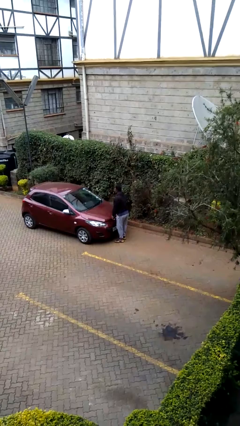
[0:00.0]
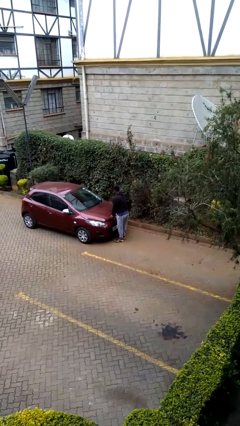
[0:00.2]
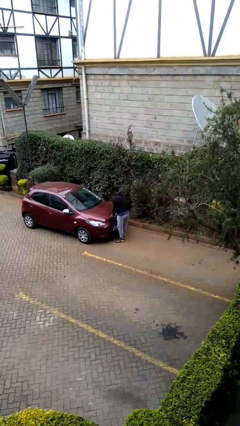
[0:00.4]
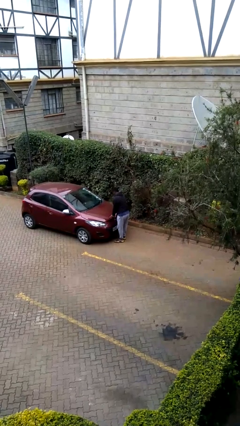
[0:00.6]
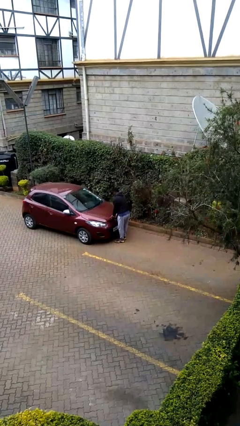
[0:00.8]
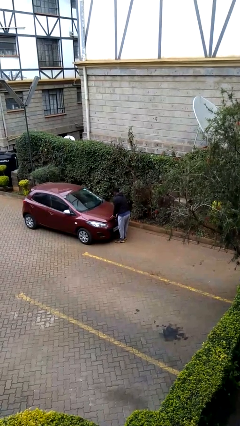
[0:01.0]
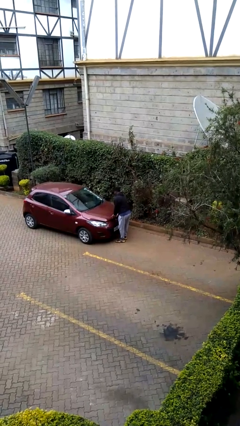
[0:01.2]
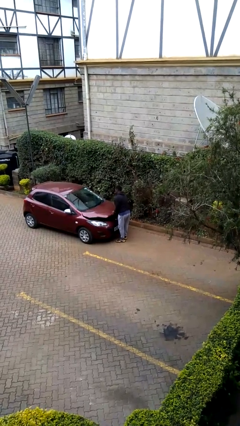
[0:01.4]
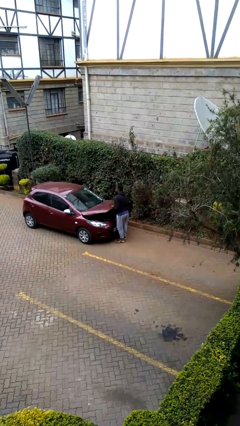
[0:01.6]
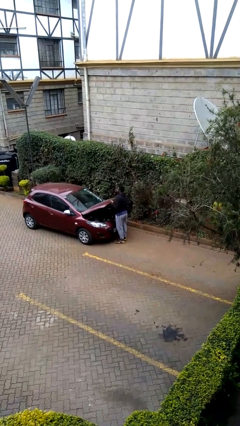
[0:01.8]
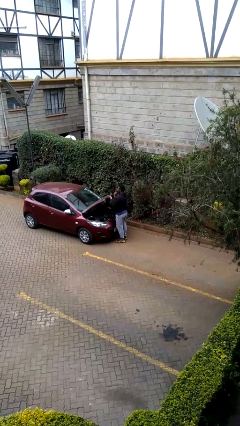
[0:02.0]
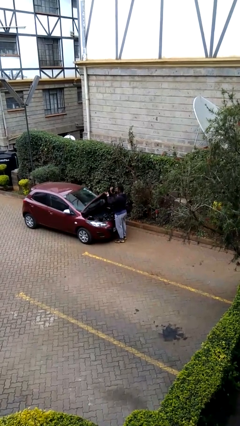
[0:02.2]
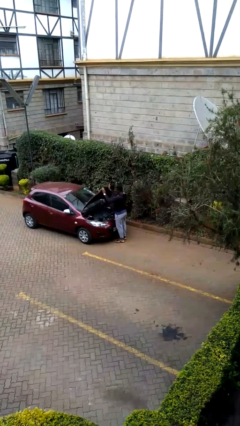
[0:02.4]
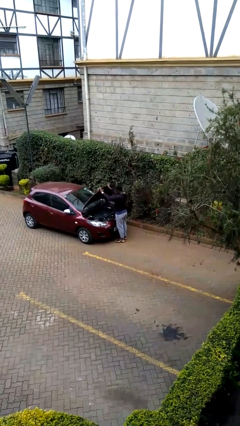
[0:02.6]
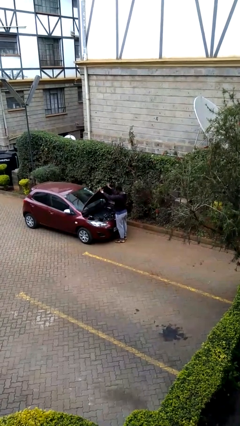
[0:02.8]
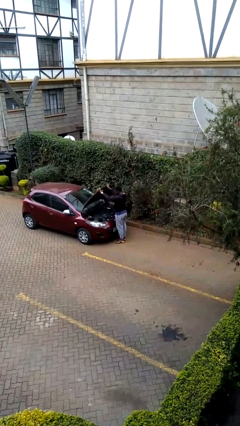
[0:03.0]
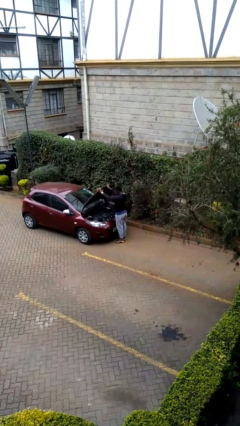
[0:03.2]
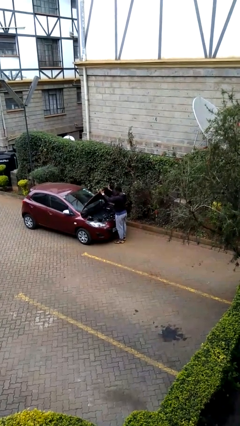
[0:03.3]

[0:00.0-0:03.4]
person opens car hood

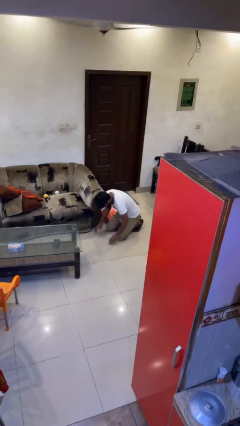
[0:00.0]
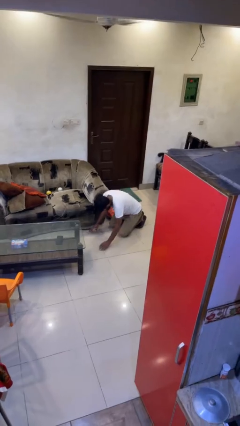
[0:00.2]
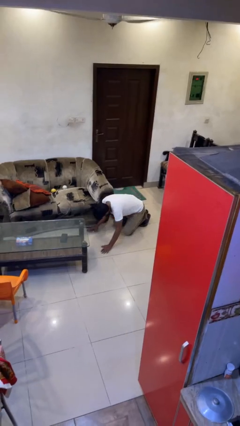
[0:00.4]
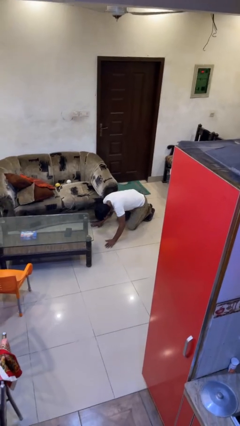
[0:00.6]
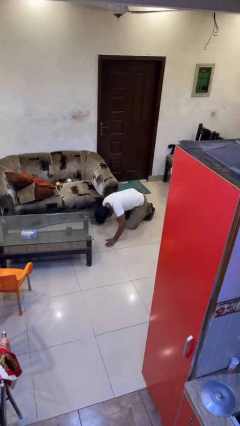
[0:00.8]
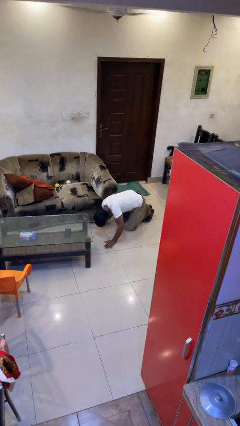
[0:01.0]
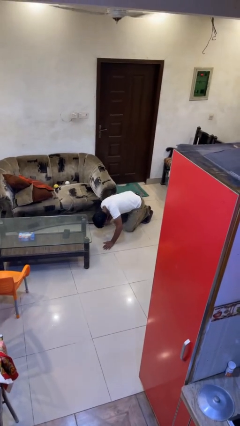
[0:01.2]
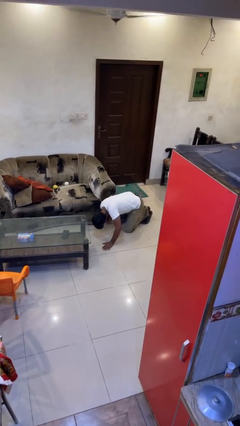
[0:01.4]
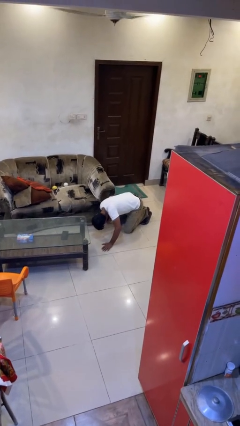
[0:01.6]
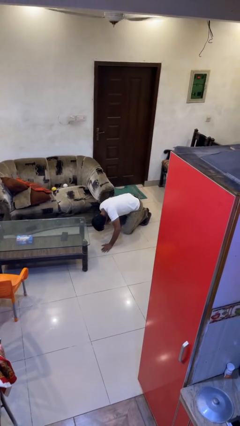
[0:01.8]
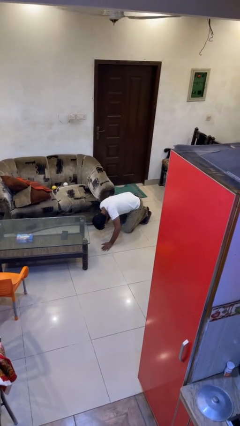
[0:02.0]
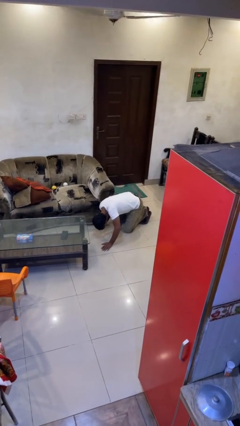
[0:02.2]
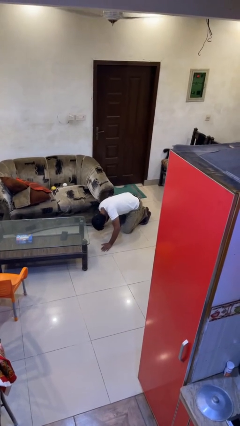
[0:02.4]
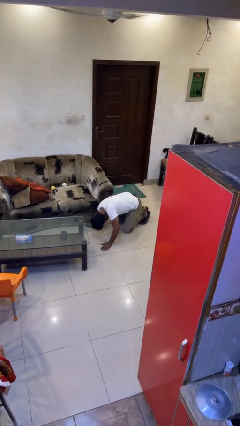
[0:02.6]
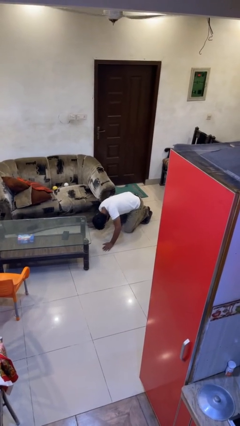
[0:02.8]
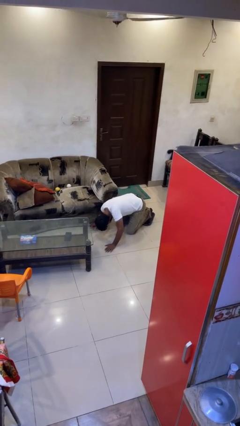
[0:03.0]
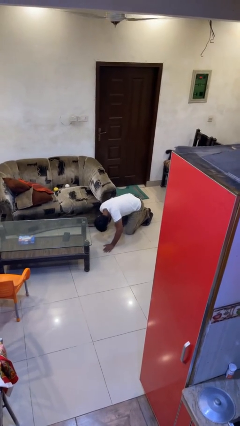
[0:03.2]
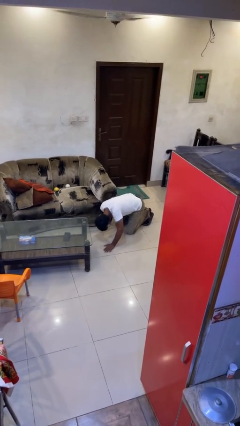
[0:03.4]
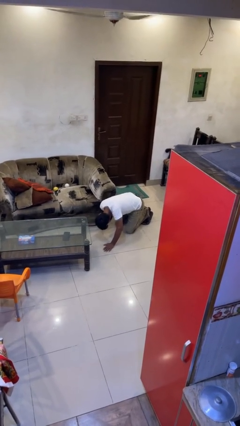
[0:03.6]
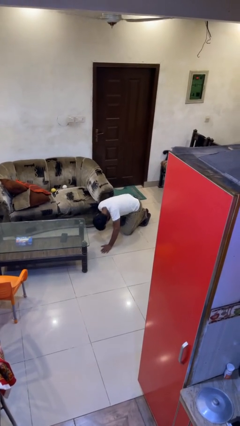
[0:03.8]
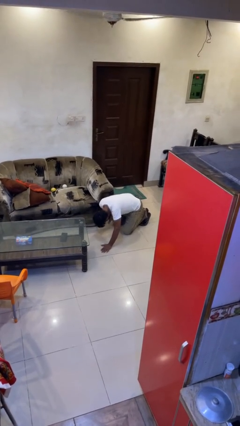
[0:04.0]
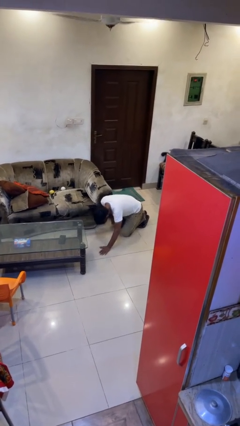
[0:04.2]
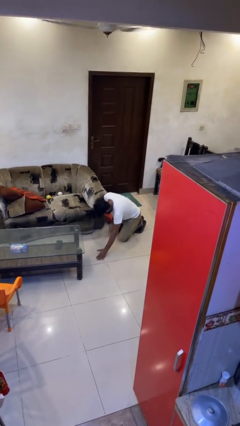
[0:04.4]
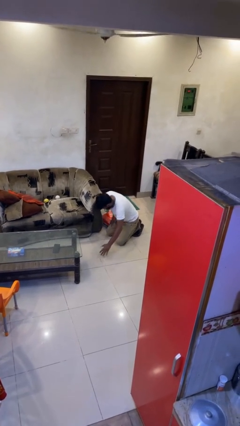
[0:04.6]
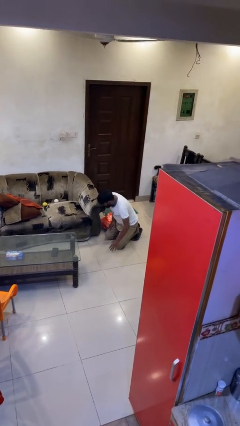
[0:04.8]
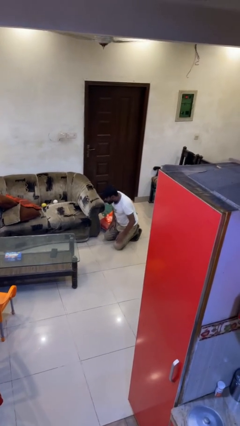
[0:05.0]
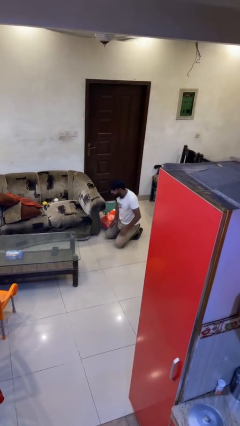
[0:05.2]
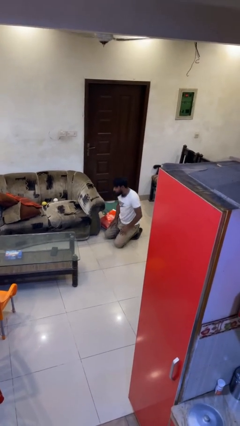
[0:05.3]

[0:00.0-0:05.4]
person searches under couch

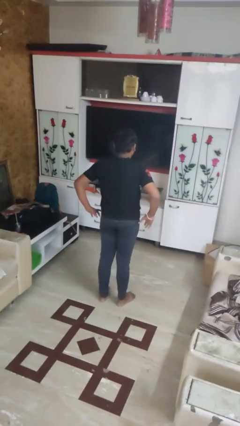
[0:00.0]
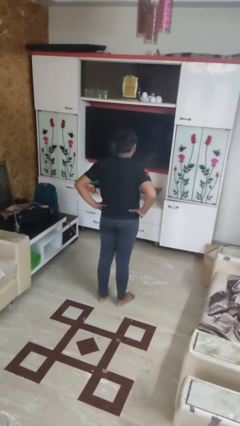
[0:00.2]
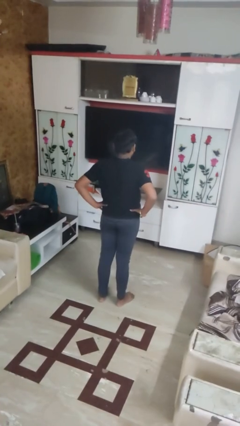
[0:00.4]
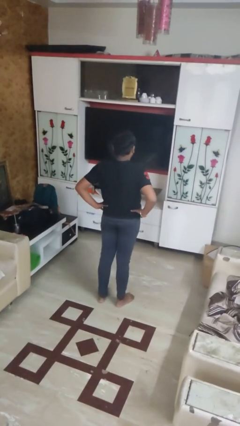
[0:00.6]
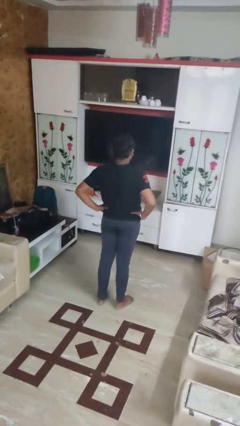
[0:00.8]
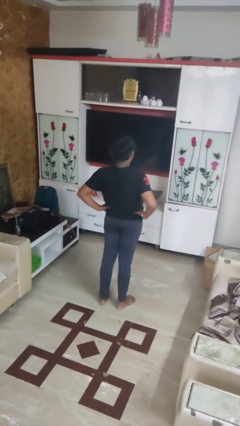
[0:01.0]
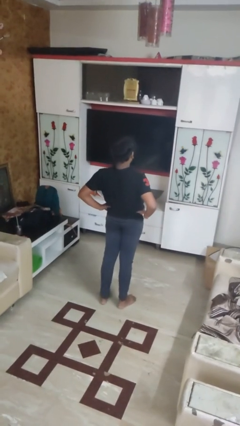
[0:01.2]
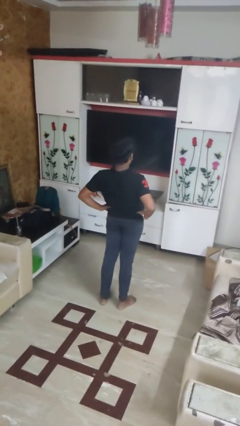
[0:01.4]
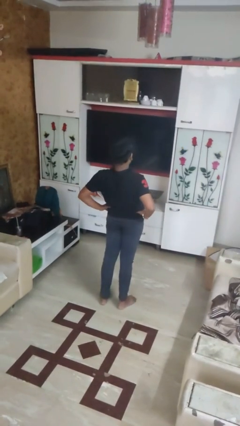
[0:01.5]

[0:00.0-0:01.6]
person stretches back

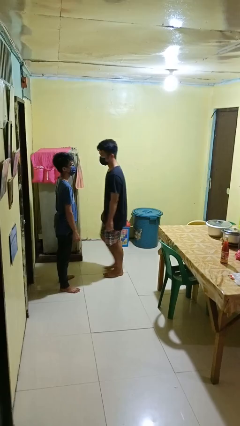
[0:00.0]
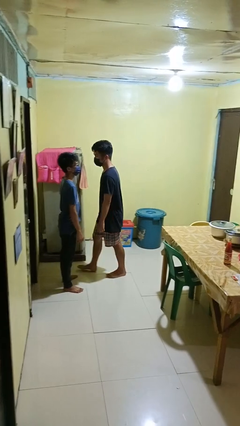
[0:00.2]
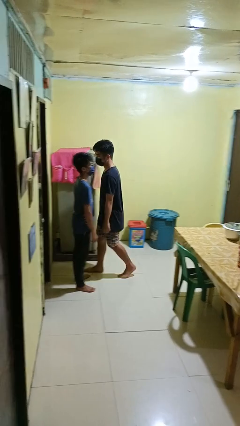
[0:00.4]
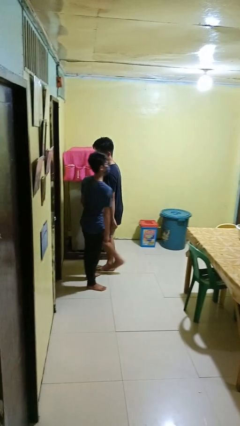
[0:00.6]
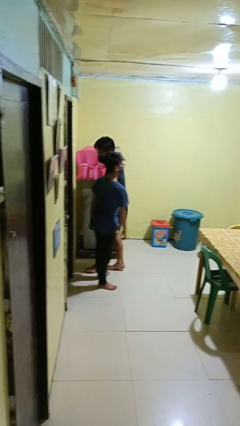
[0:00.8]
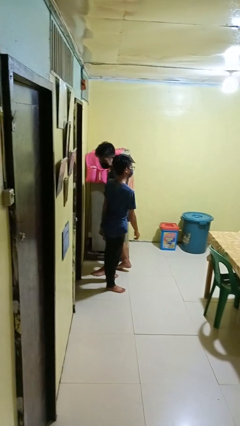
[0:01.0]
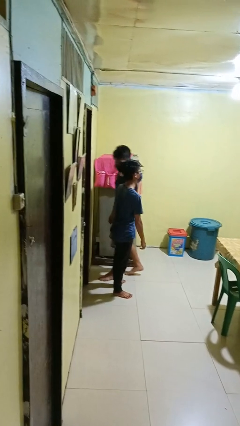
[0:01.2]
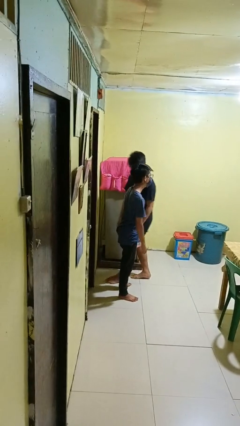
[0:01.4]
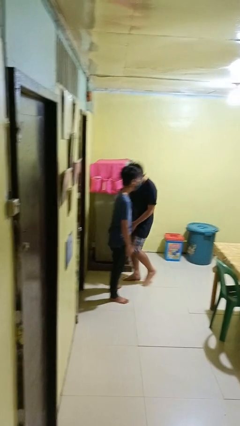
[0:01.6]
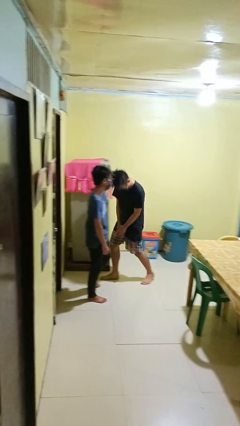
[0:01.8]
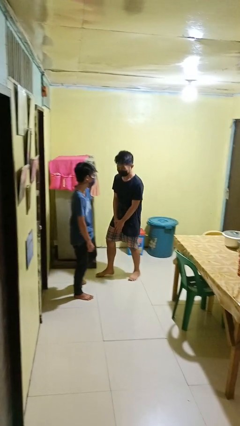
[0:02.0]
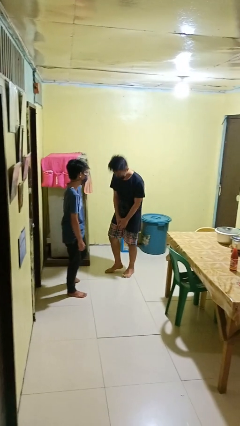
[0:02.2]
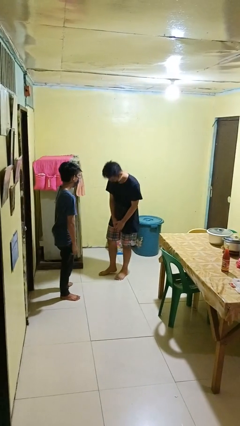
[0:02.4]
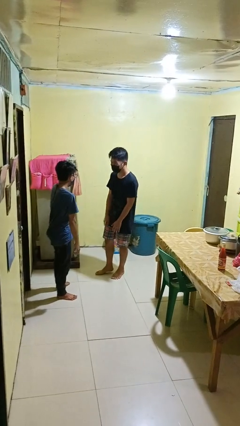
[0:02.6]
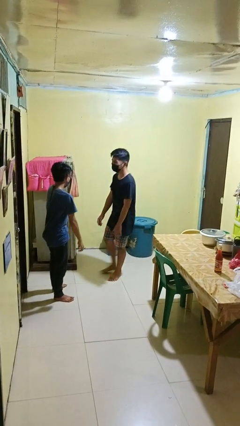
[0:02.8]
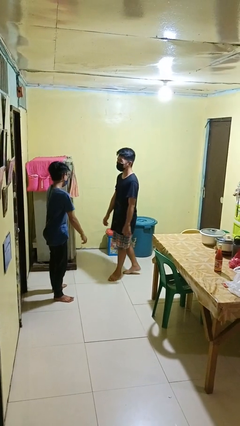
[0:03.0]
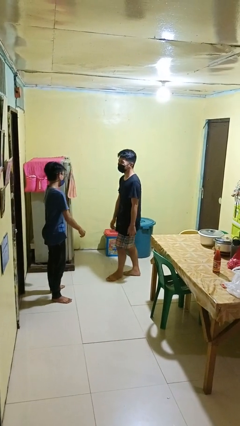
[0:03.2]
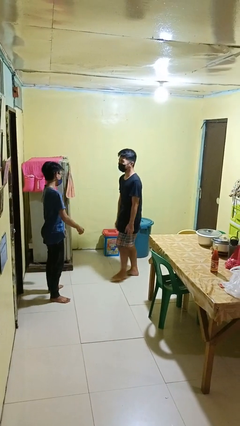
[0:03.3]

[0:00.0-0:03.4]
person bumps into person

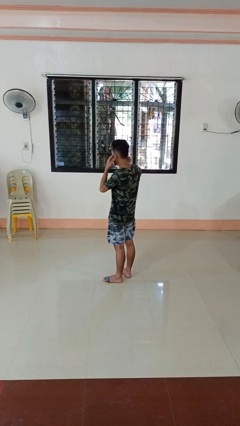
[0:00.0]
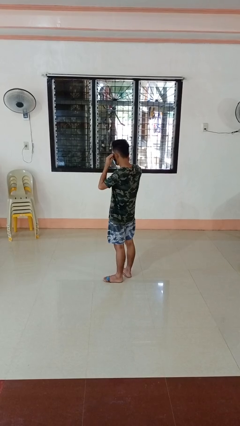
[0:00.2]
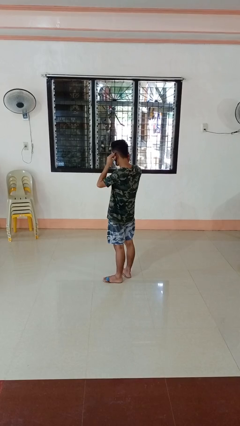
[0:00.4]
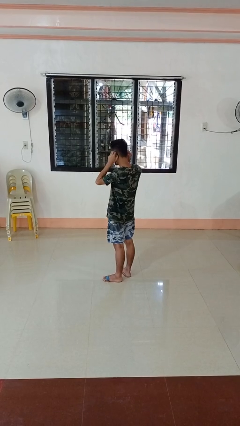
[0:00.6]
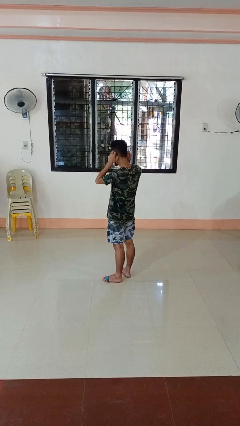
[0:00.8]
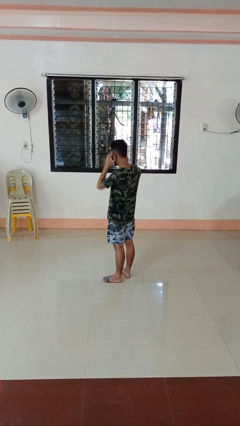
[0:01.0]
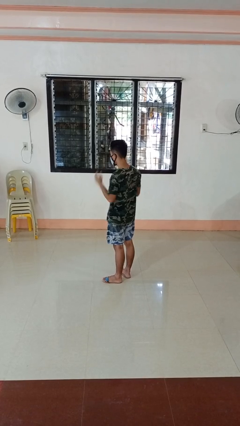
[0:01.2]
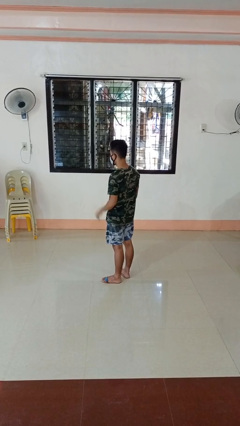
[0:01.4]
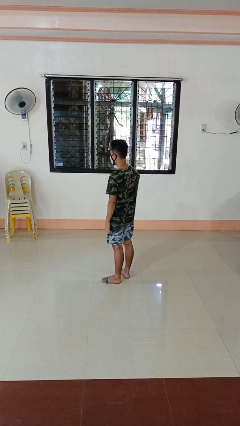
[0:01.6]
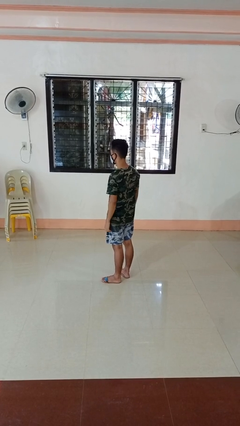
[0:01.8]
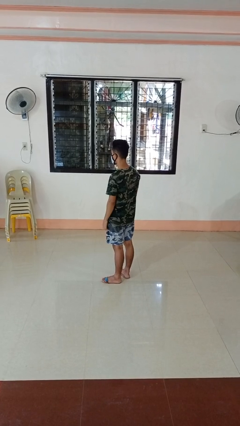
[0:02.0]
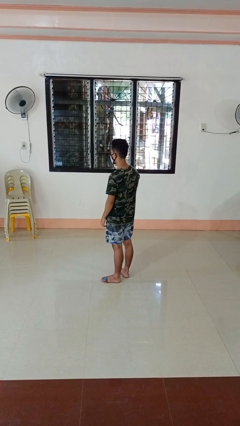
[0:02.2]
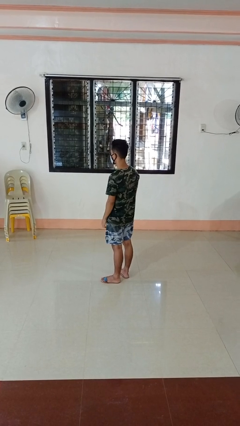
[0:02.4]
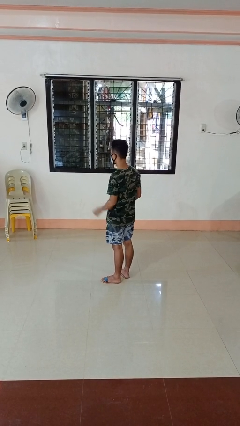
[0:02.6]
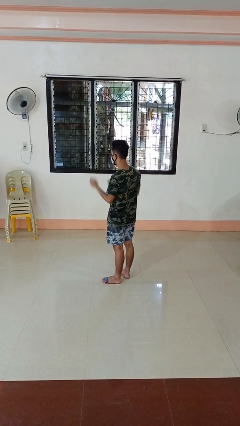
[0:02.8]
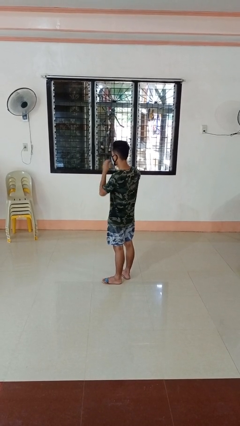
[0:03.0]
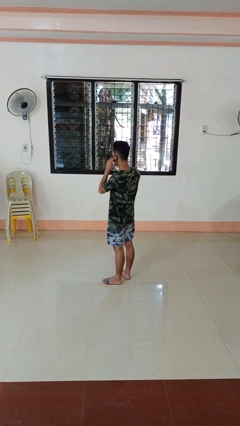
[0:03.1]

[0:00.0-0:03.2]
person puts on facemask

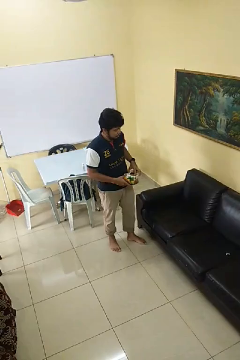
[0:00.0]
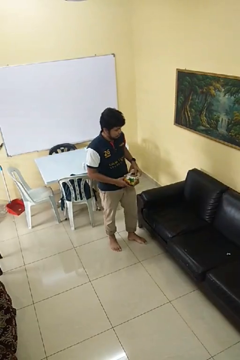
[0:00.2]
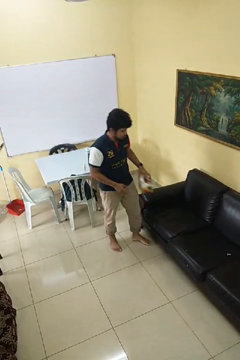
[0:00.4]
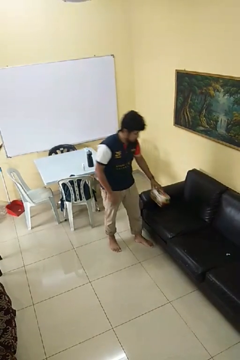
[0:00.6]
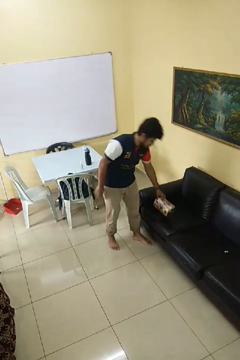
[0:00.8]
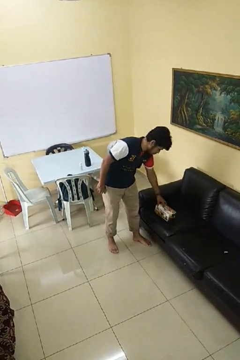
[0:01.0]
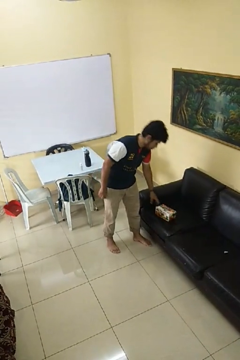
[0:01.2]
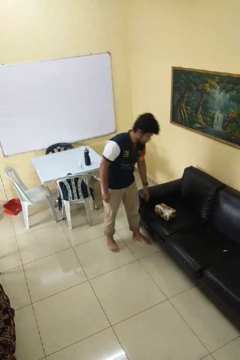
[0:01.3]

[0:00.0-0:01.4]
person puts down object on couch
